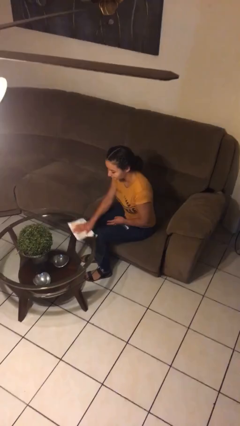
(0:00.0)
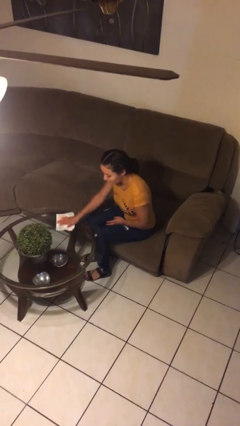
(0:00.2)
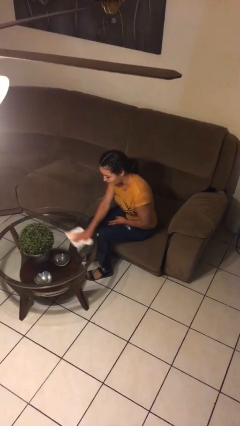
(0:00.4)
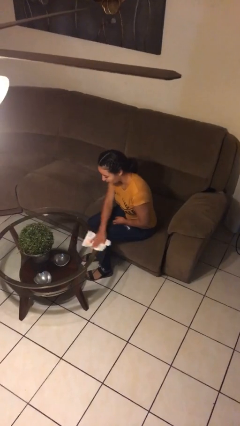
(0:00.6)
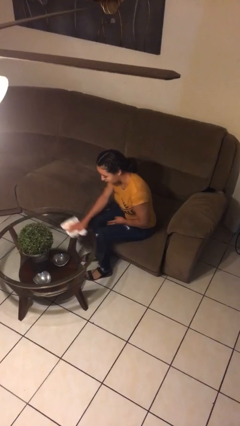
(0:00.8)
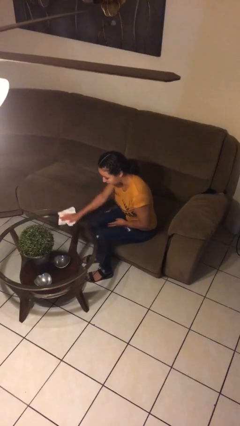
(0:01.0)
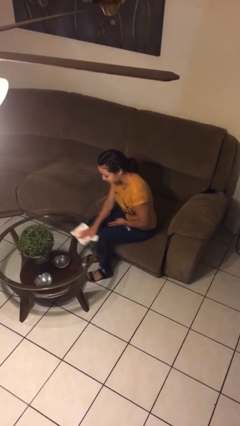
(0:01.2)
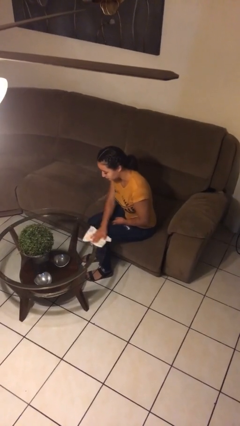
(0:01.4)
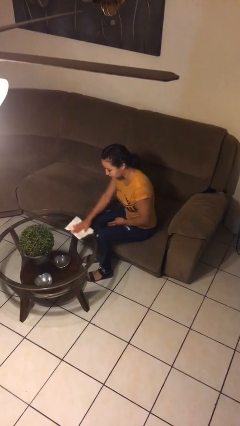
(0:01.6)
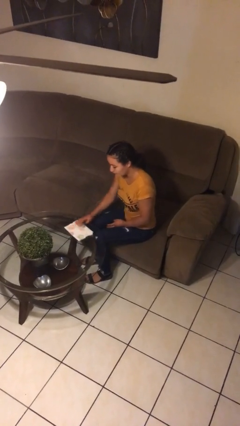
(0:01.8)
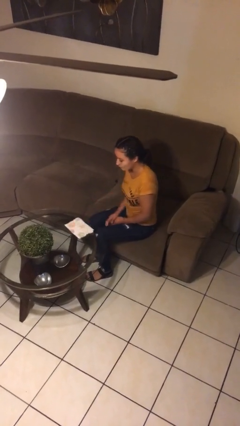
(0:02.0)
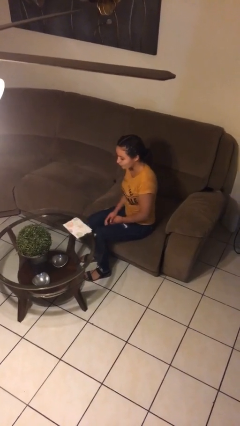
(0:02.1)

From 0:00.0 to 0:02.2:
person cleans table with rag

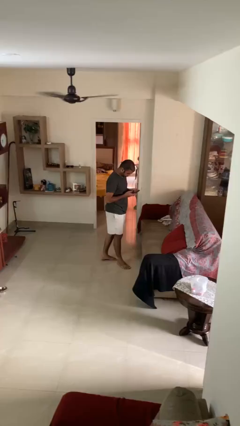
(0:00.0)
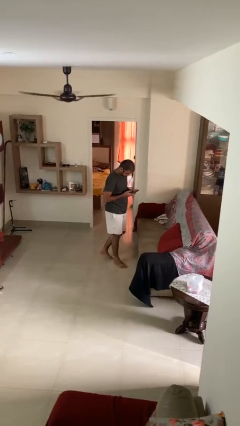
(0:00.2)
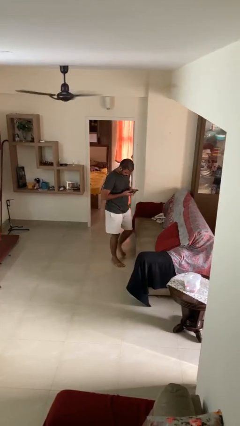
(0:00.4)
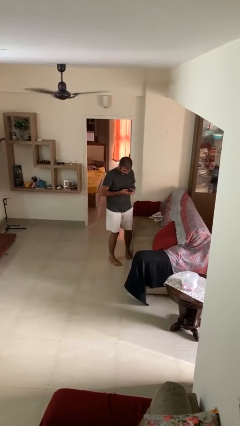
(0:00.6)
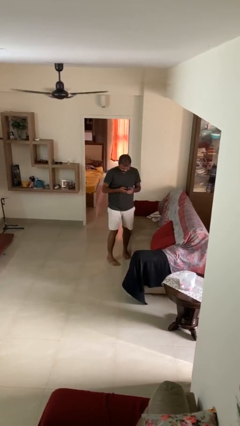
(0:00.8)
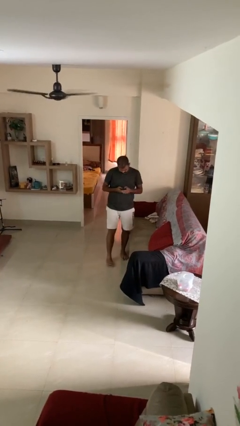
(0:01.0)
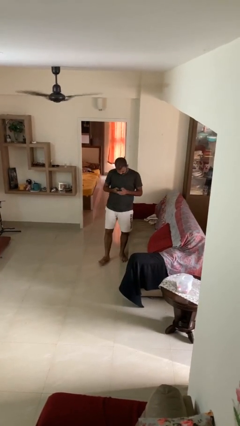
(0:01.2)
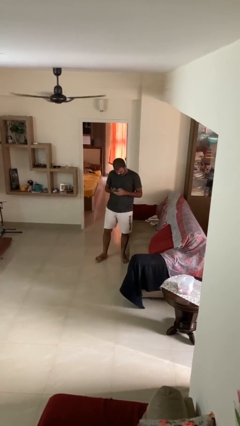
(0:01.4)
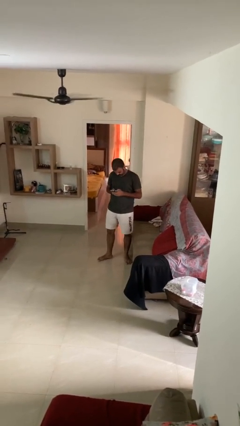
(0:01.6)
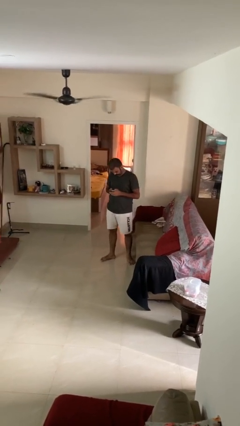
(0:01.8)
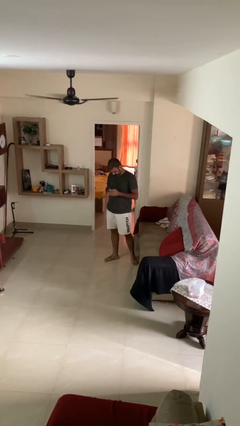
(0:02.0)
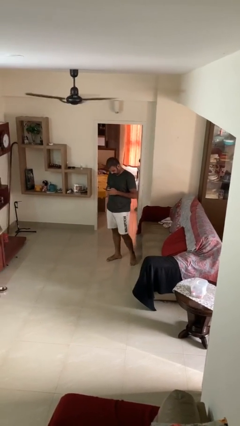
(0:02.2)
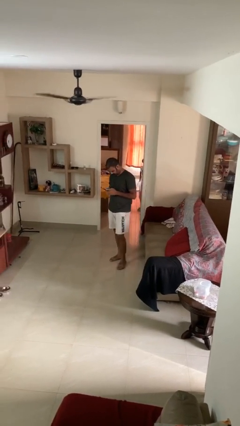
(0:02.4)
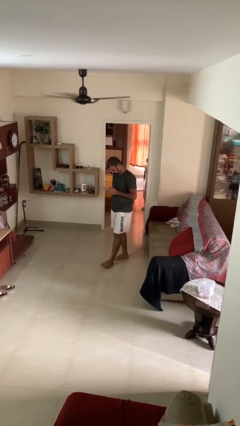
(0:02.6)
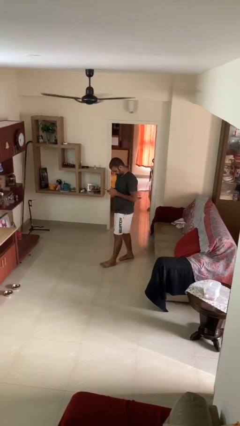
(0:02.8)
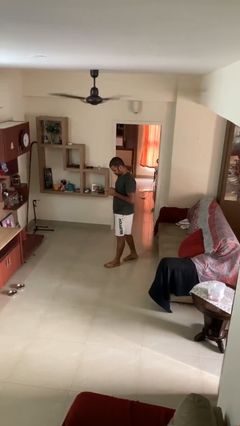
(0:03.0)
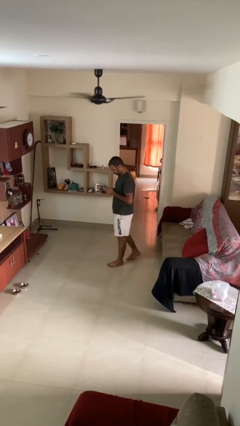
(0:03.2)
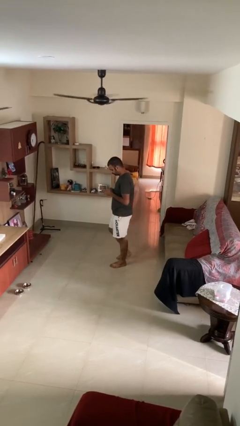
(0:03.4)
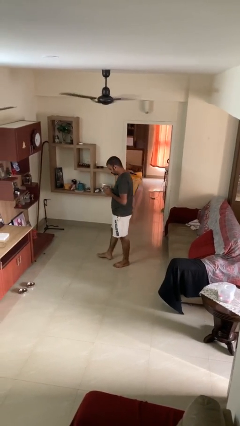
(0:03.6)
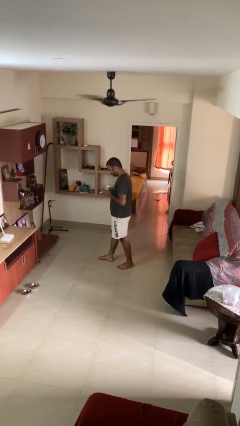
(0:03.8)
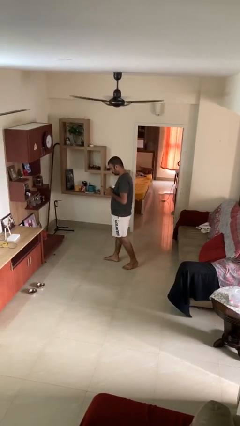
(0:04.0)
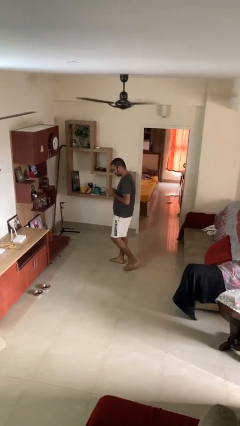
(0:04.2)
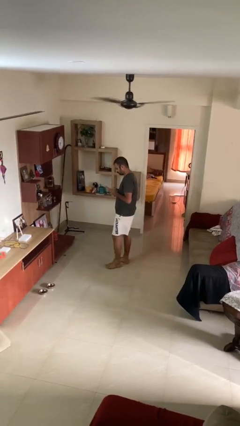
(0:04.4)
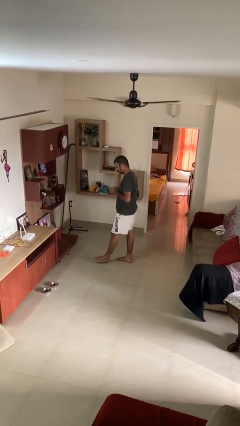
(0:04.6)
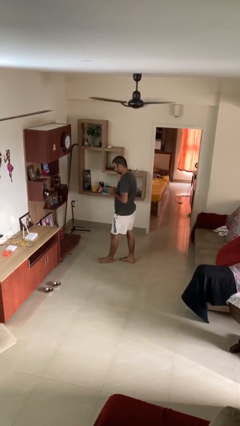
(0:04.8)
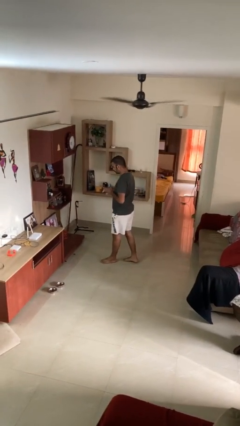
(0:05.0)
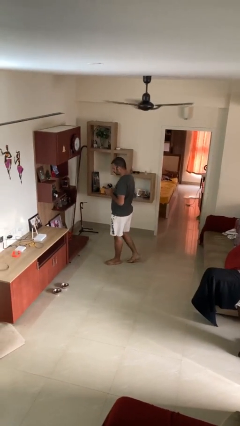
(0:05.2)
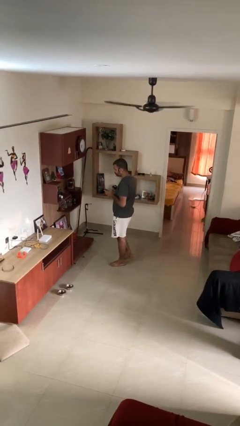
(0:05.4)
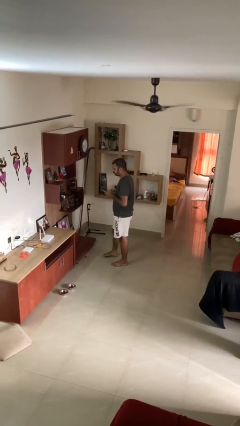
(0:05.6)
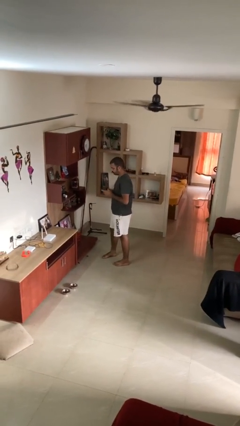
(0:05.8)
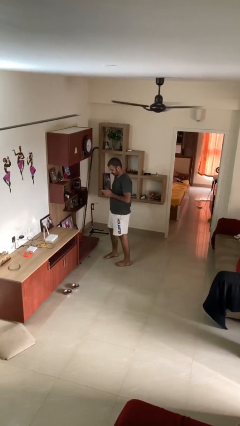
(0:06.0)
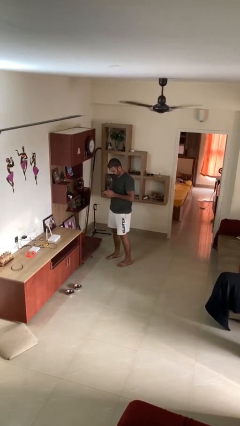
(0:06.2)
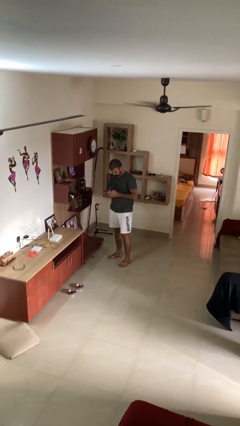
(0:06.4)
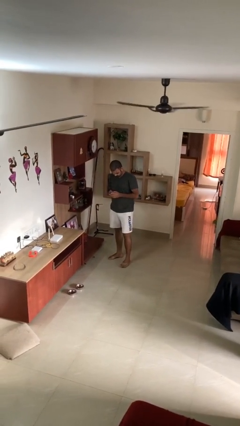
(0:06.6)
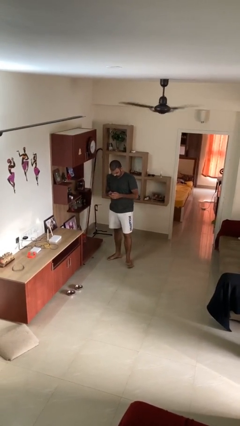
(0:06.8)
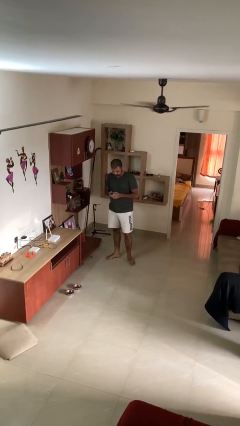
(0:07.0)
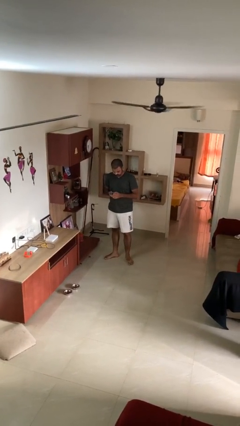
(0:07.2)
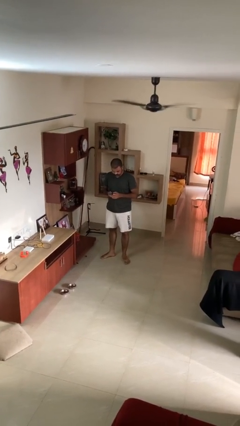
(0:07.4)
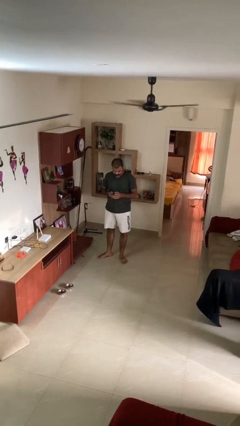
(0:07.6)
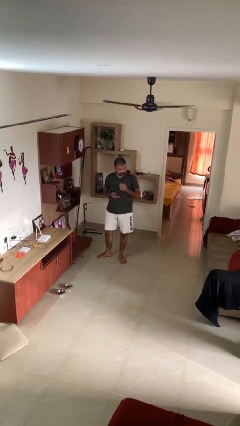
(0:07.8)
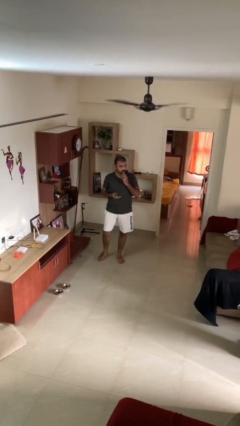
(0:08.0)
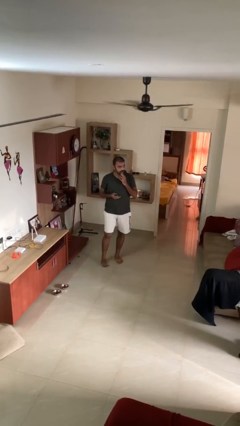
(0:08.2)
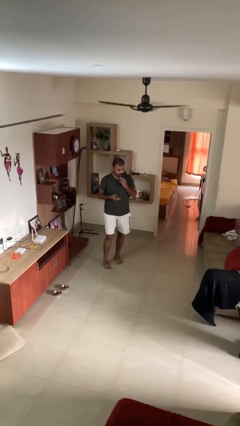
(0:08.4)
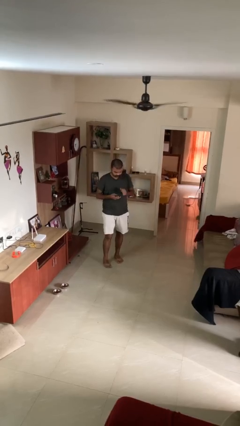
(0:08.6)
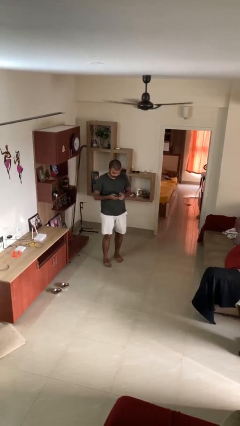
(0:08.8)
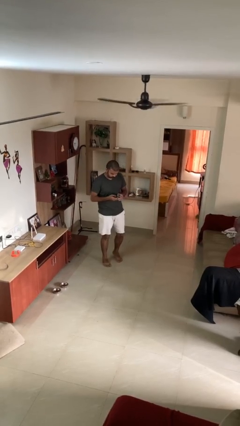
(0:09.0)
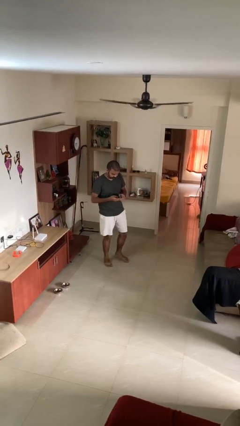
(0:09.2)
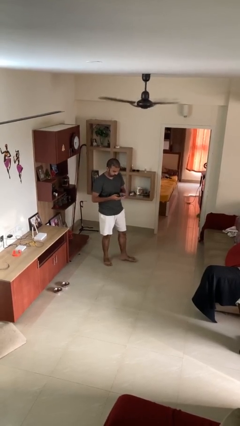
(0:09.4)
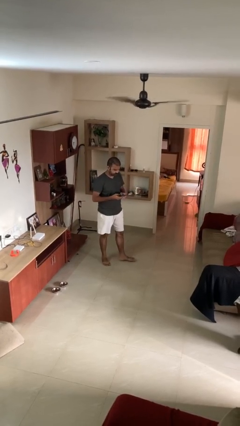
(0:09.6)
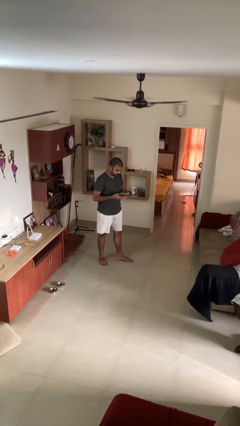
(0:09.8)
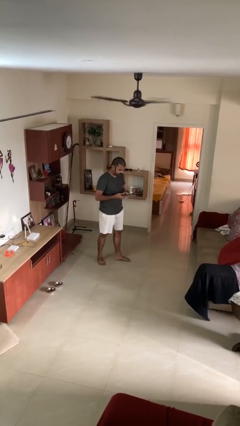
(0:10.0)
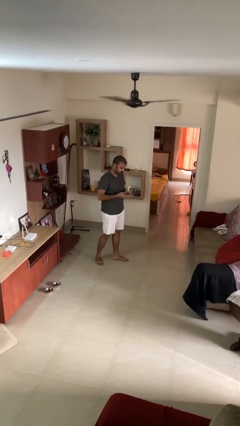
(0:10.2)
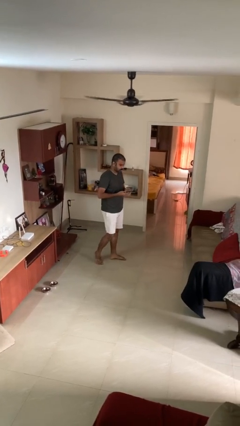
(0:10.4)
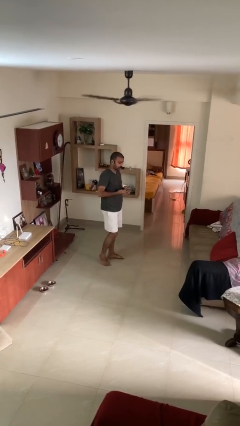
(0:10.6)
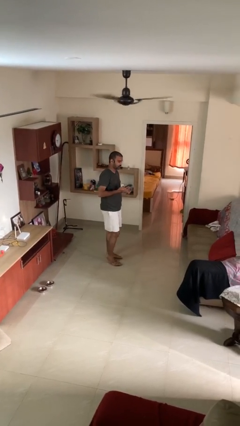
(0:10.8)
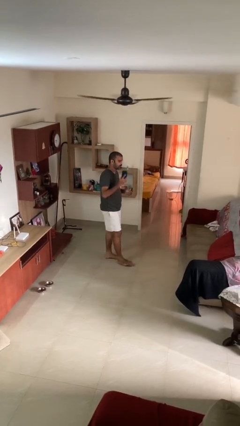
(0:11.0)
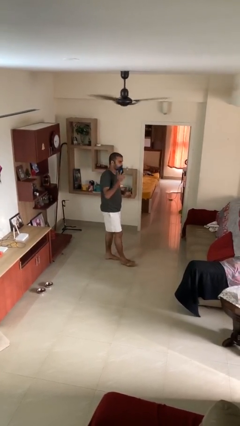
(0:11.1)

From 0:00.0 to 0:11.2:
person texts on phone

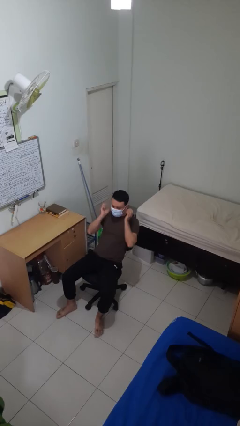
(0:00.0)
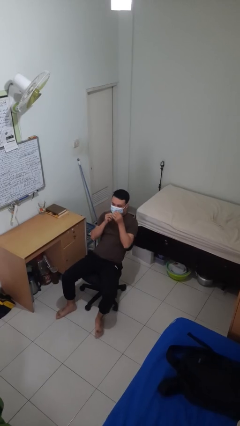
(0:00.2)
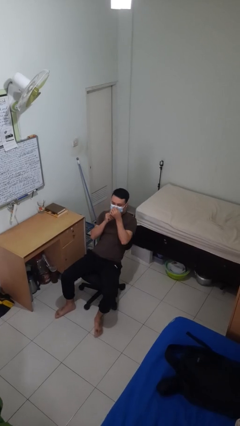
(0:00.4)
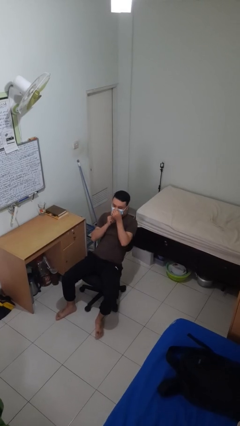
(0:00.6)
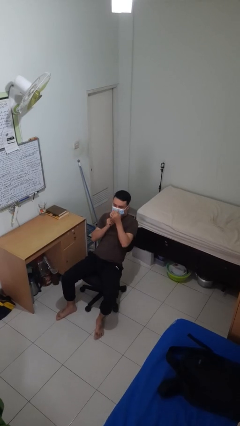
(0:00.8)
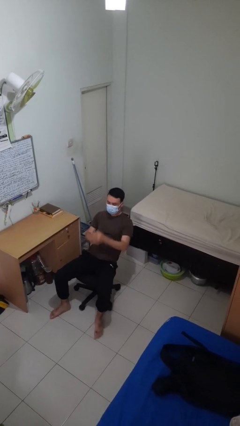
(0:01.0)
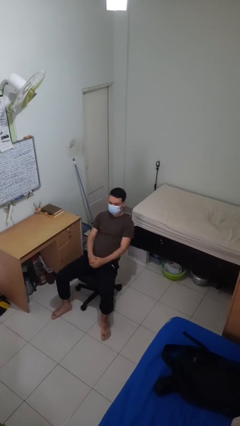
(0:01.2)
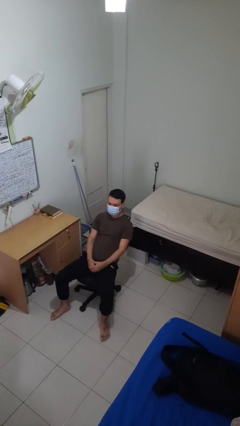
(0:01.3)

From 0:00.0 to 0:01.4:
person puts on facemask

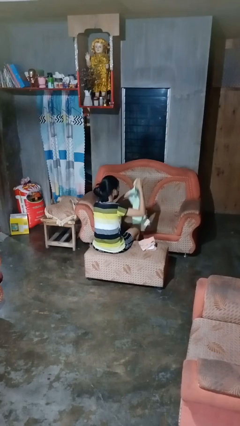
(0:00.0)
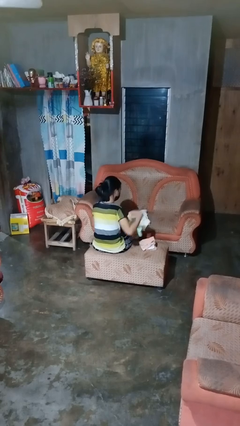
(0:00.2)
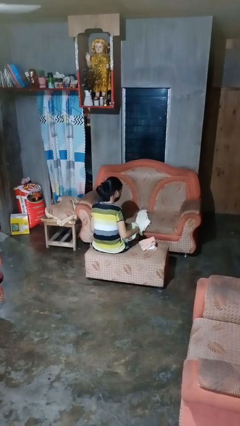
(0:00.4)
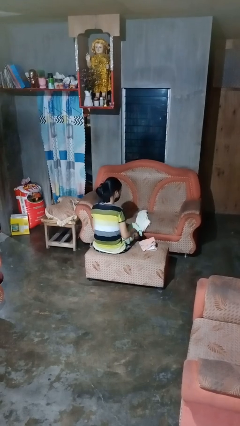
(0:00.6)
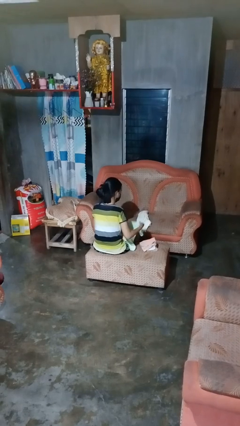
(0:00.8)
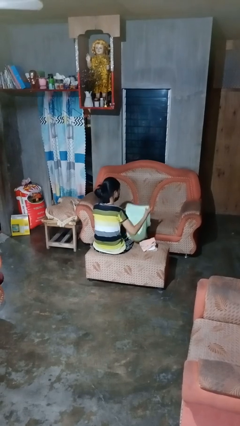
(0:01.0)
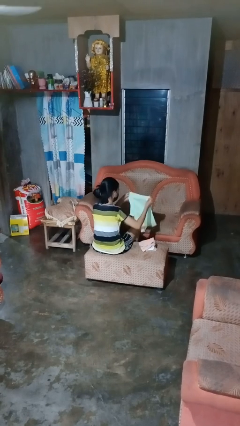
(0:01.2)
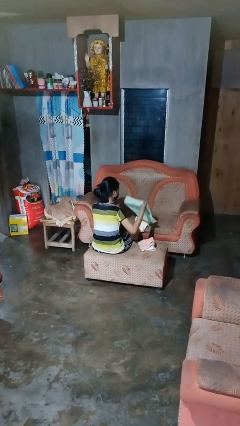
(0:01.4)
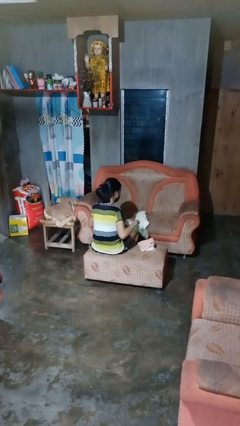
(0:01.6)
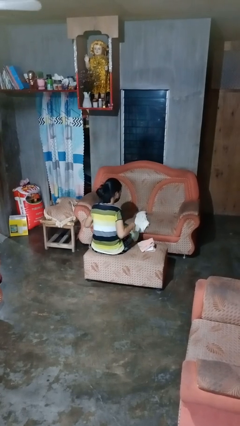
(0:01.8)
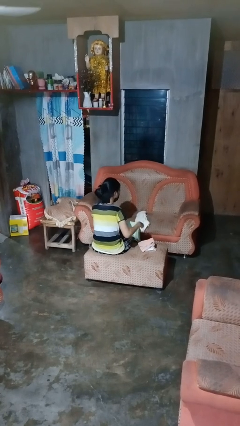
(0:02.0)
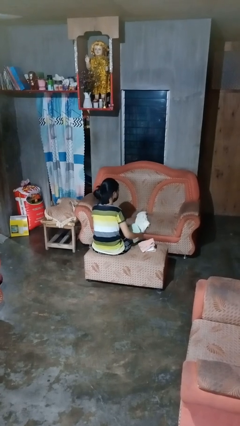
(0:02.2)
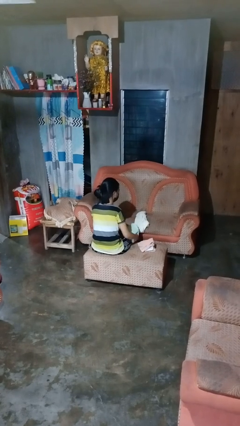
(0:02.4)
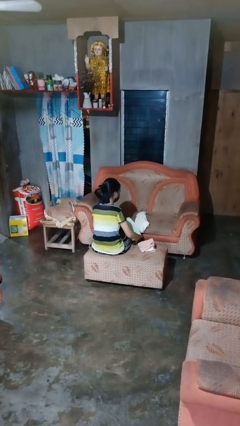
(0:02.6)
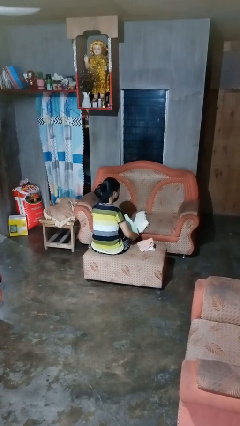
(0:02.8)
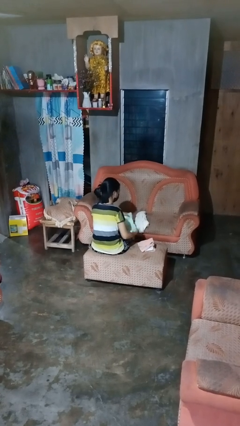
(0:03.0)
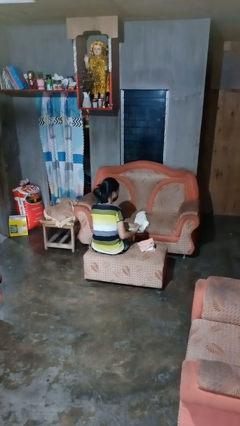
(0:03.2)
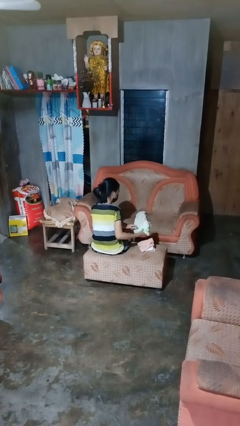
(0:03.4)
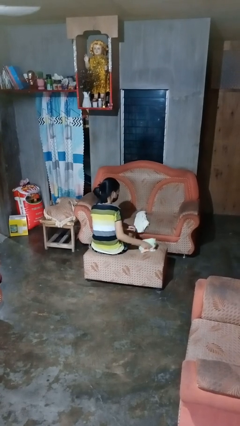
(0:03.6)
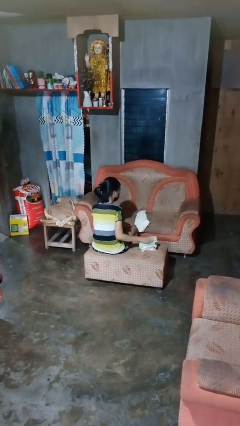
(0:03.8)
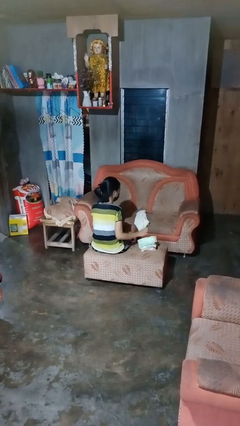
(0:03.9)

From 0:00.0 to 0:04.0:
person folds towel
